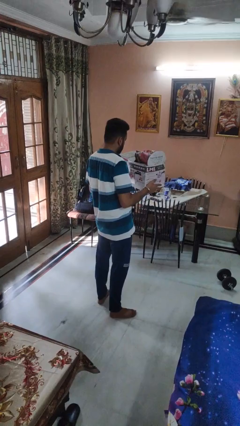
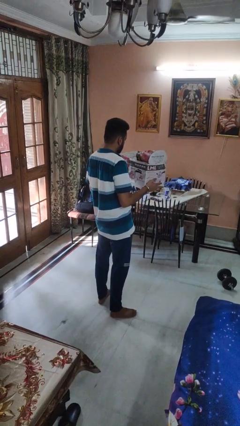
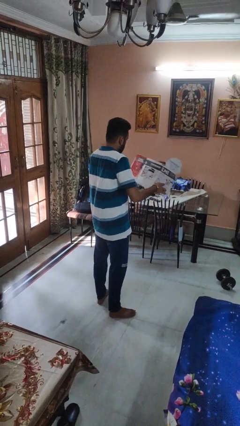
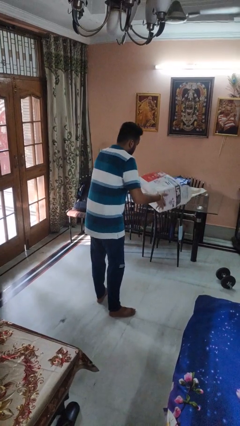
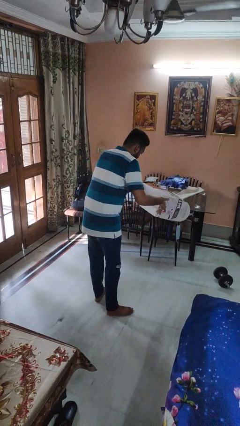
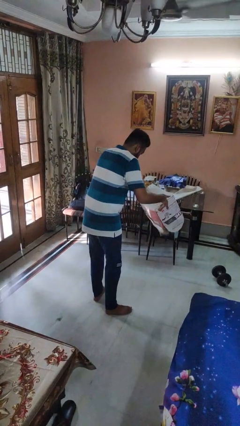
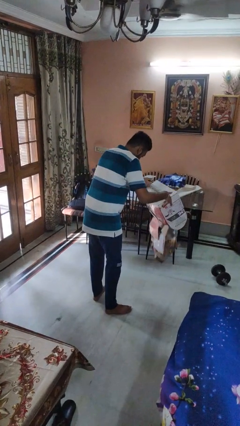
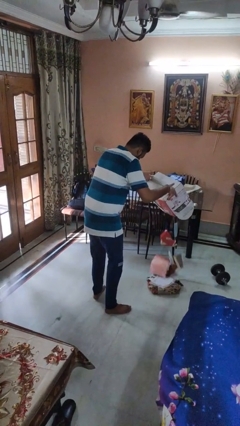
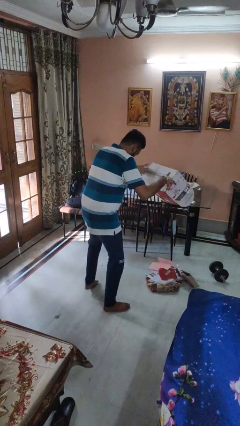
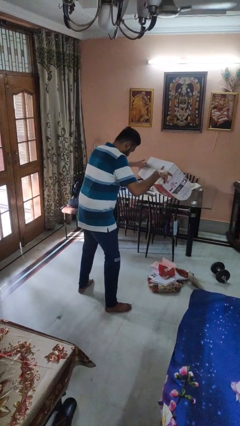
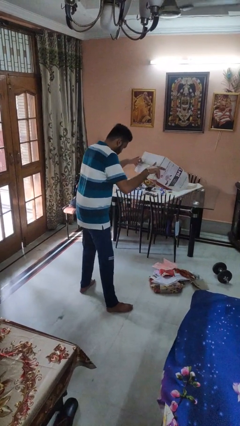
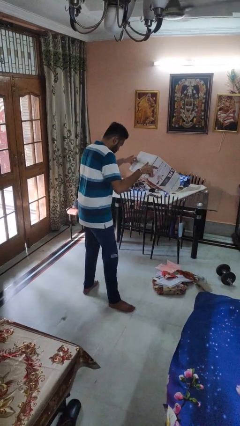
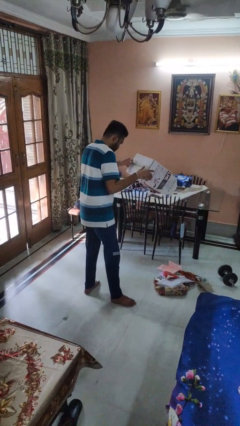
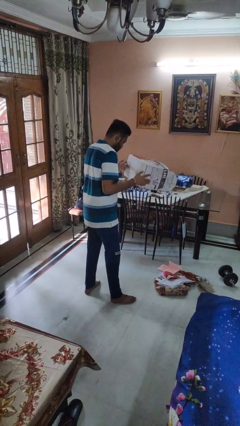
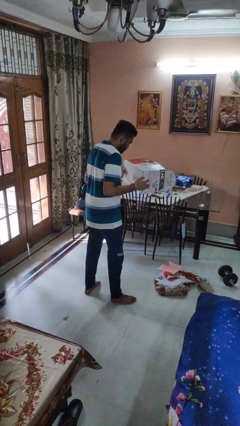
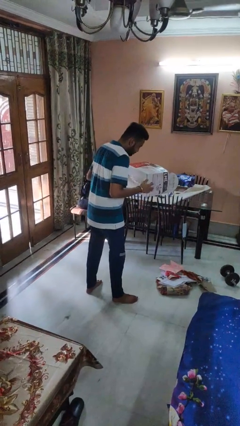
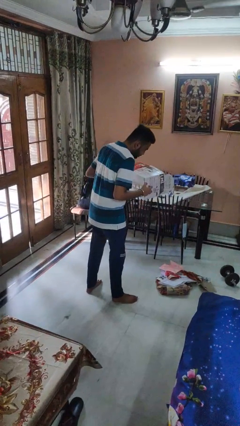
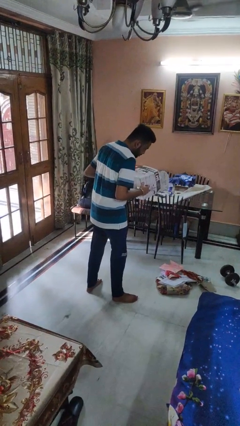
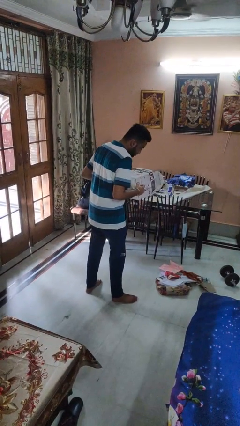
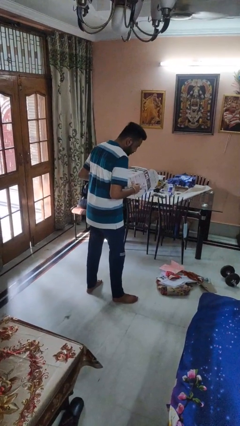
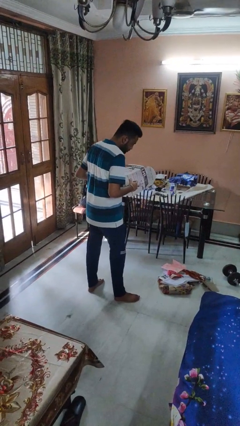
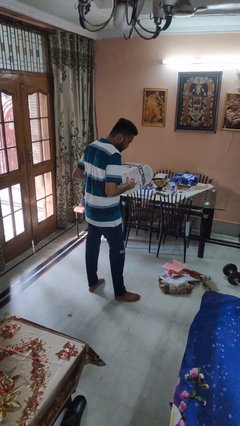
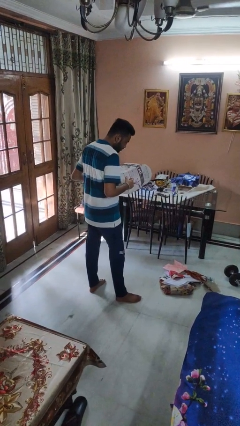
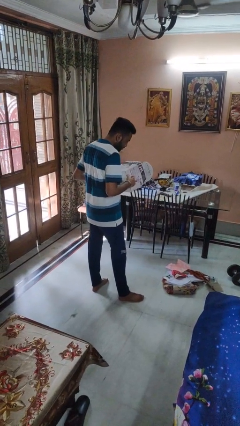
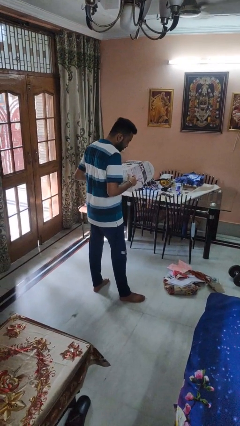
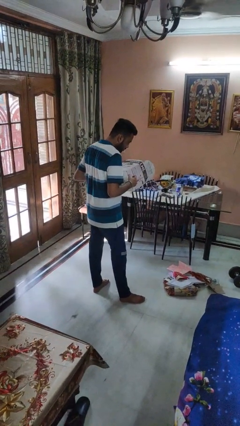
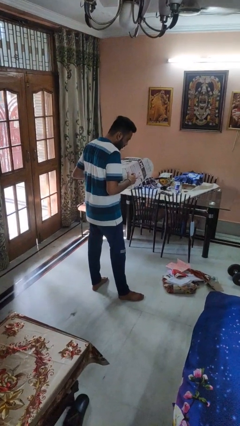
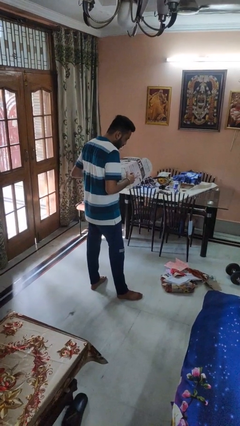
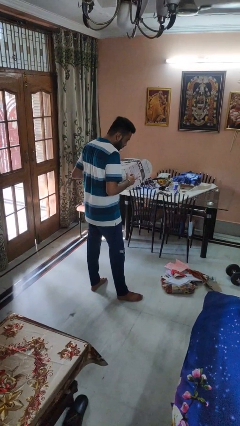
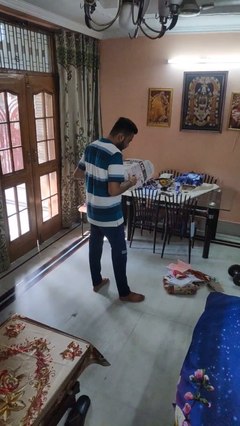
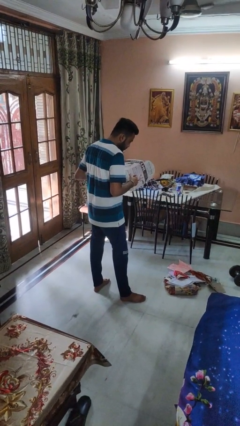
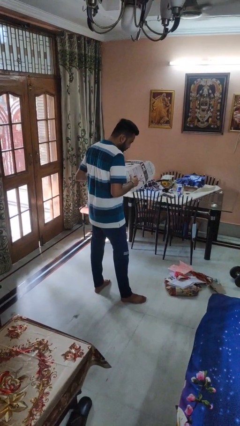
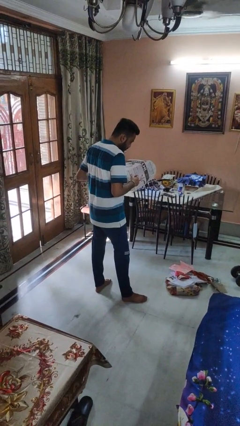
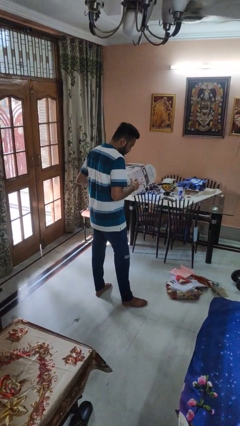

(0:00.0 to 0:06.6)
person unloads box onto floor

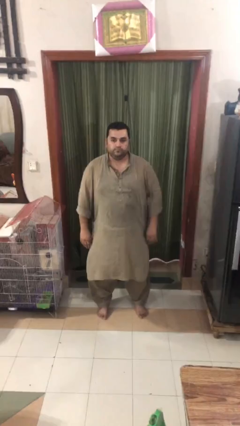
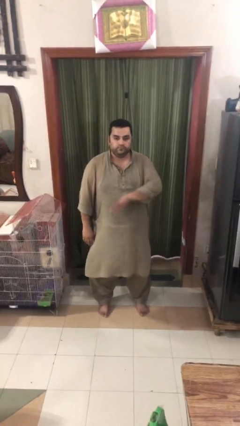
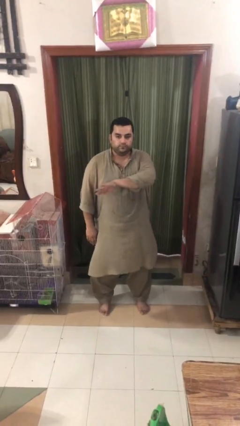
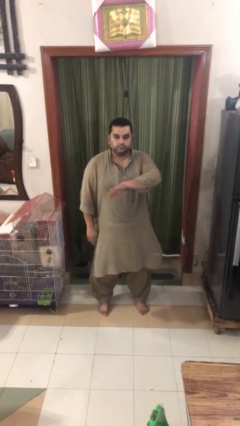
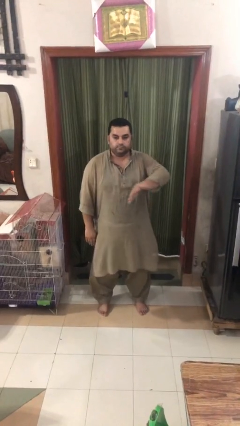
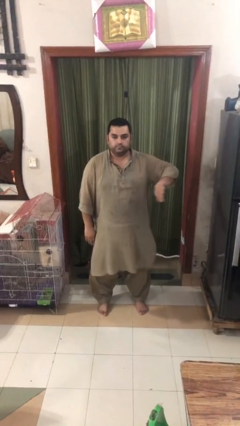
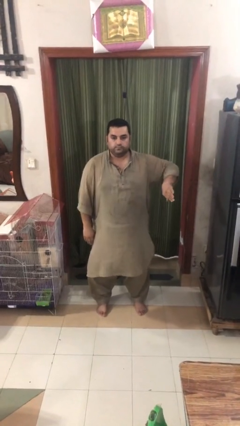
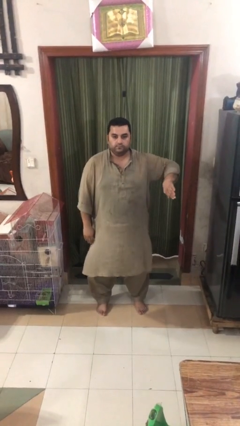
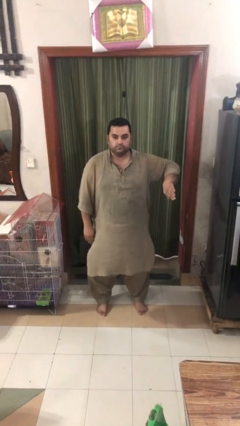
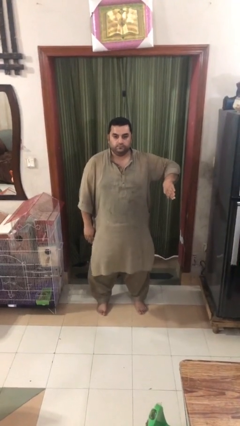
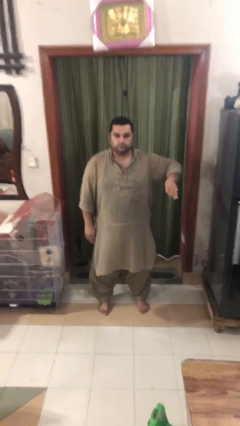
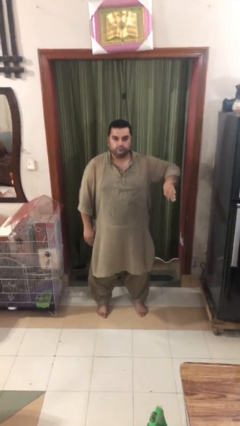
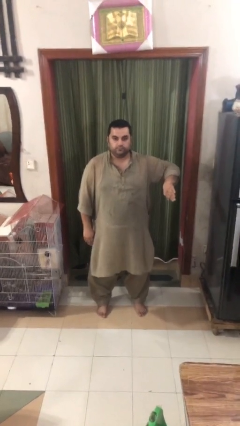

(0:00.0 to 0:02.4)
person gestures swipe left

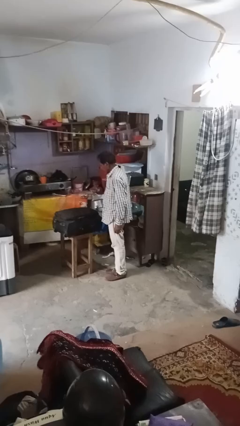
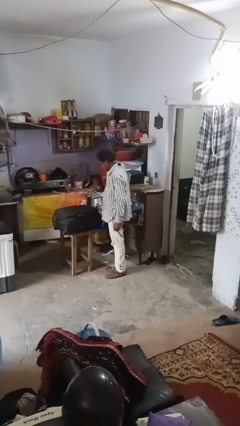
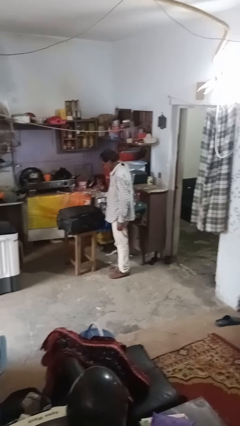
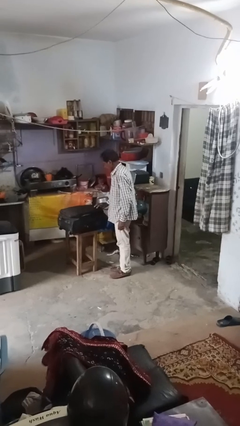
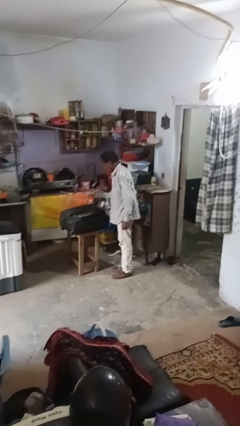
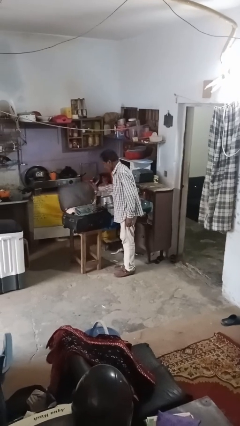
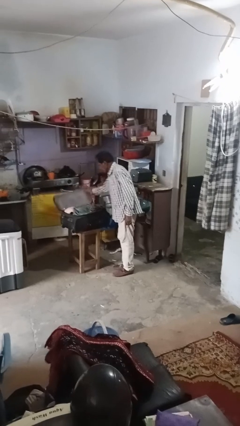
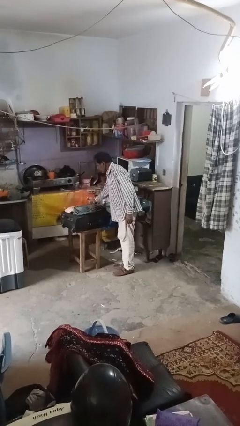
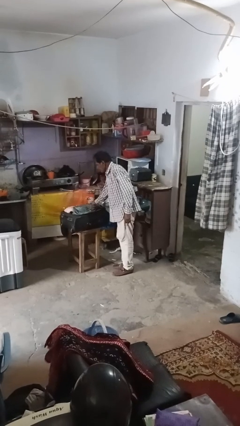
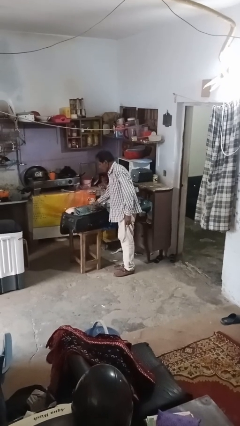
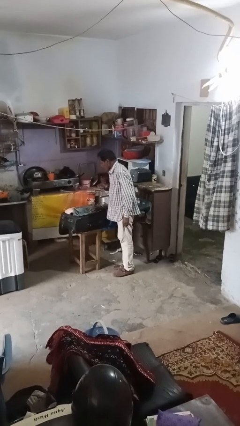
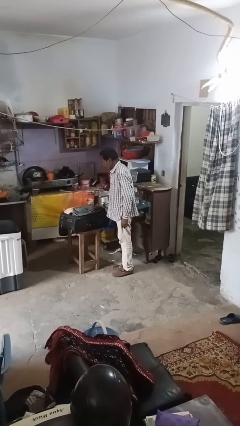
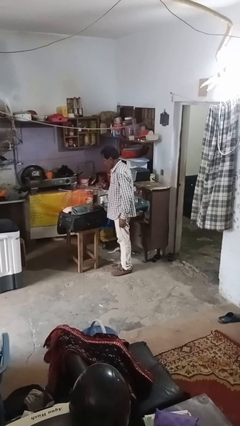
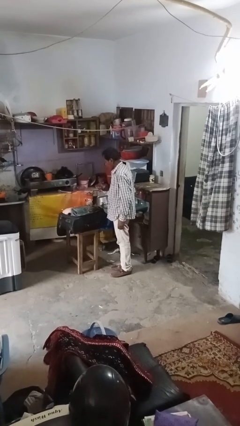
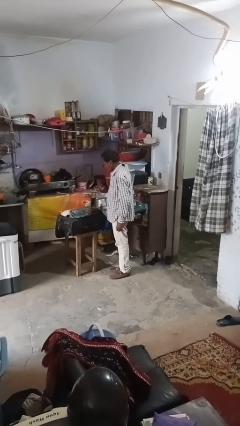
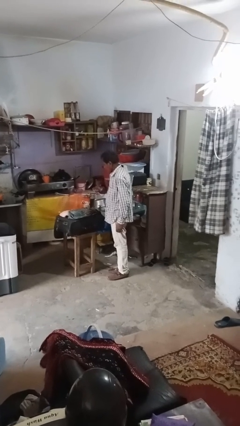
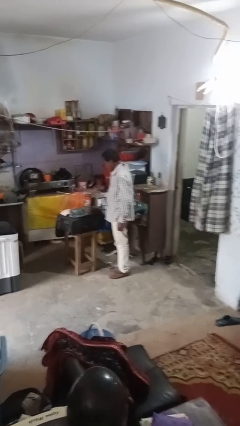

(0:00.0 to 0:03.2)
person opens suitcase

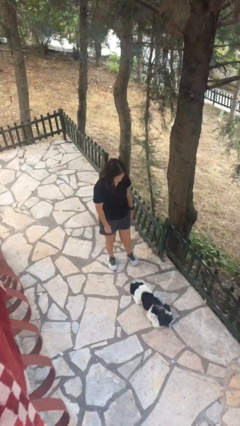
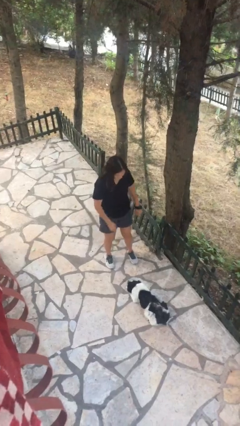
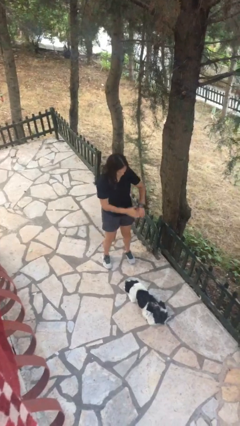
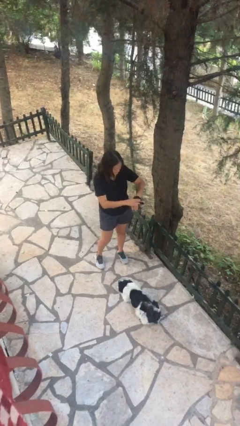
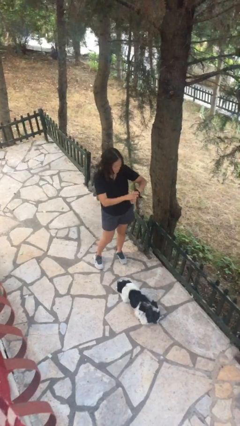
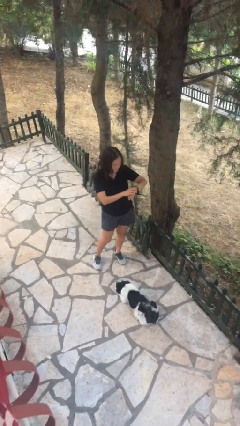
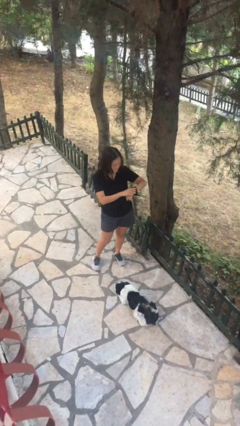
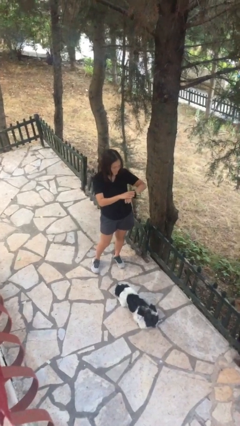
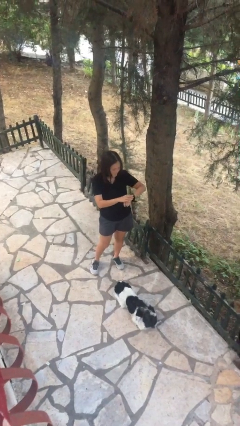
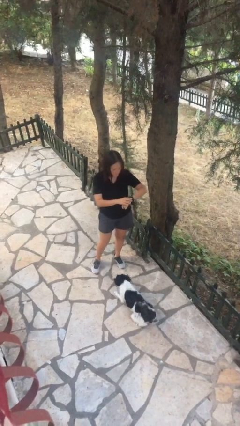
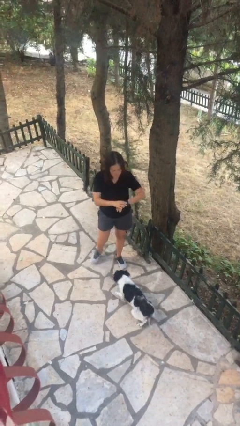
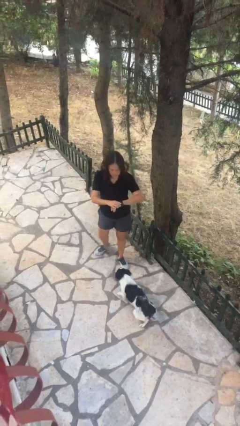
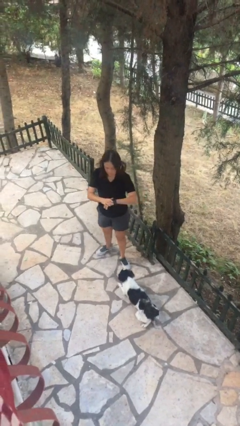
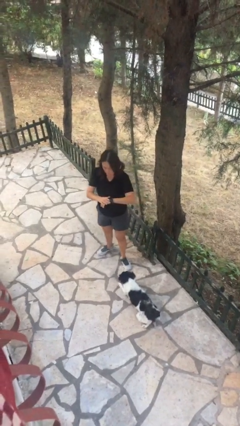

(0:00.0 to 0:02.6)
person looks at wristwatch

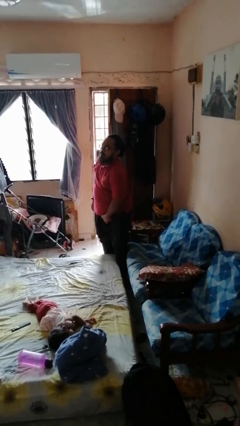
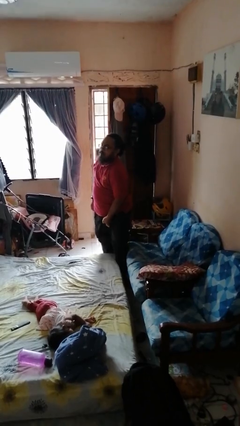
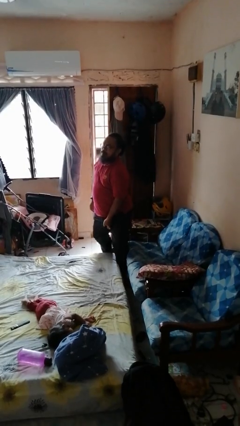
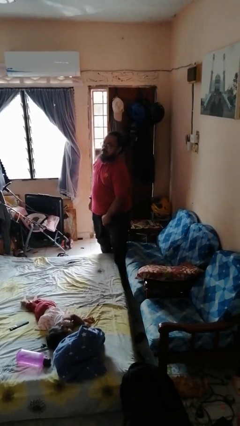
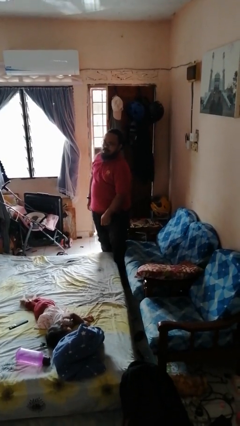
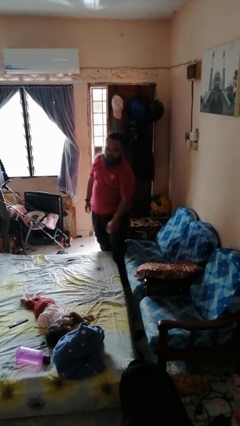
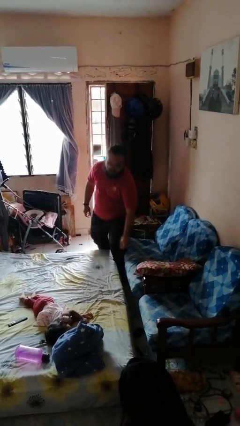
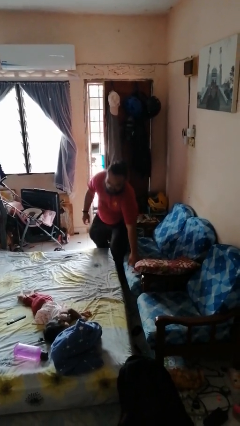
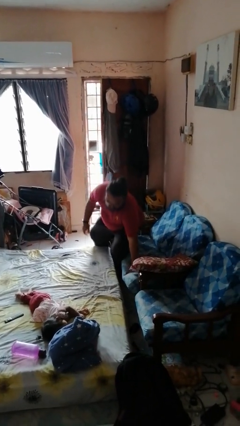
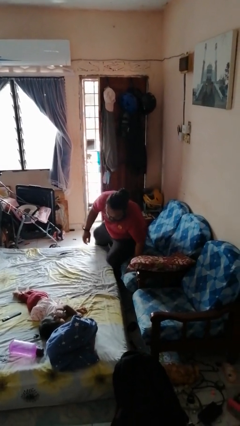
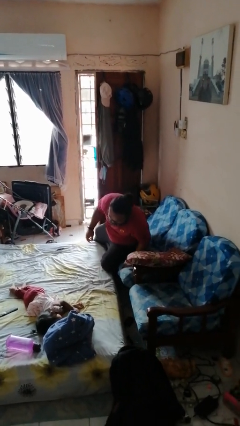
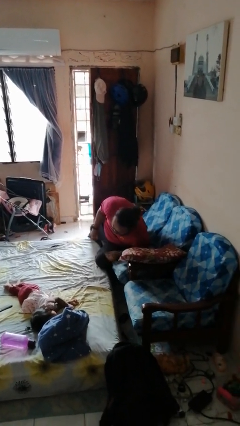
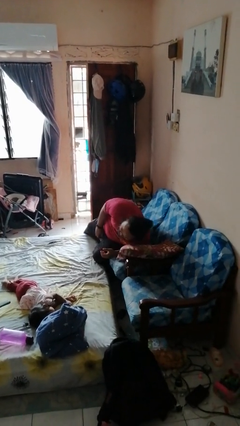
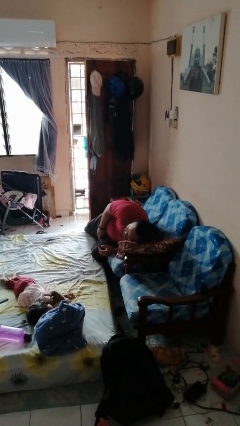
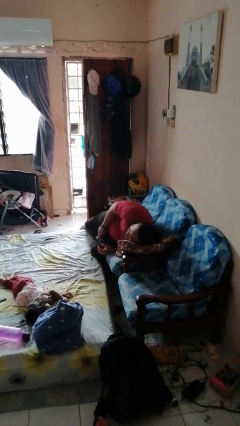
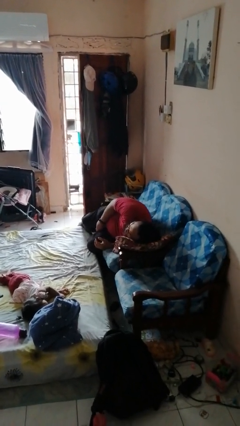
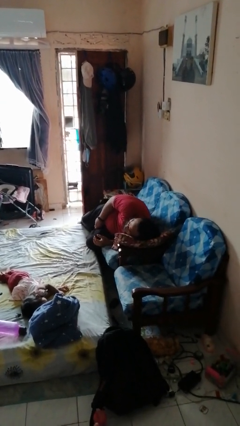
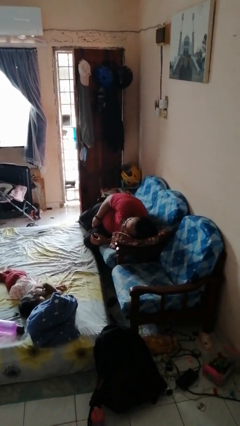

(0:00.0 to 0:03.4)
person lies down on bed
